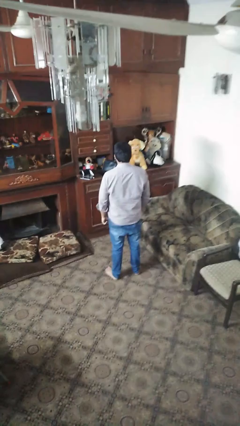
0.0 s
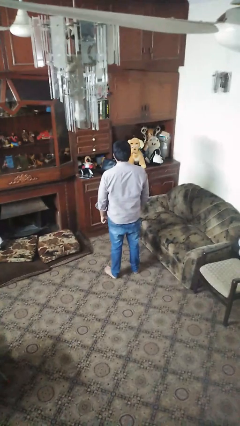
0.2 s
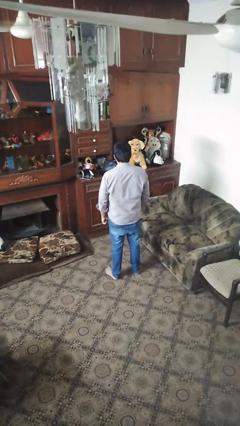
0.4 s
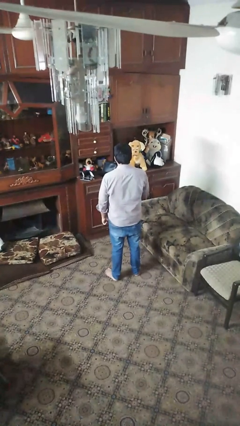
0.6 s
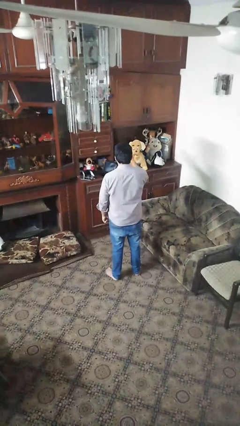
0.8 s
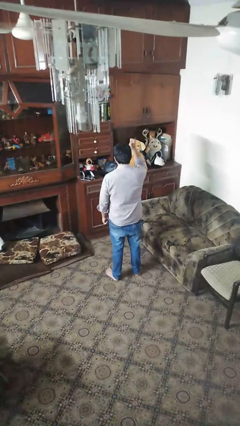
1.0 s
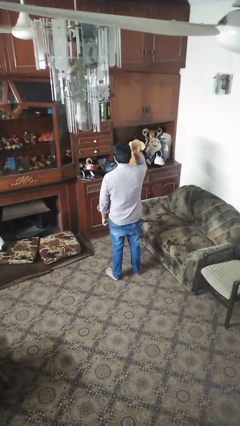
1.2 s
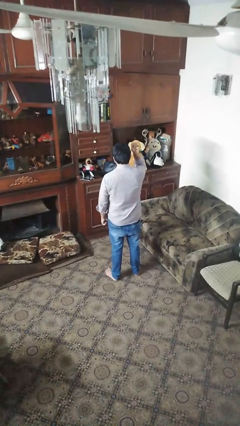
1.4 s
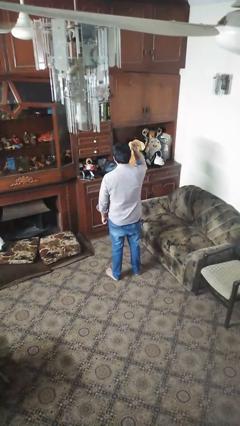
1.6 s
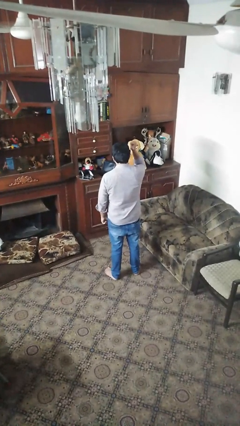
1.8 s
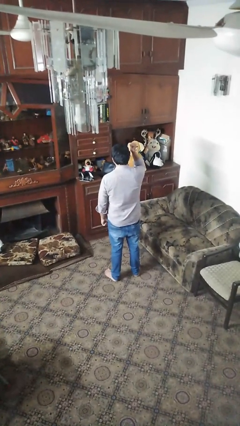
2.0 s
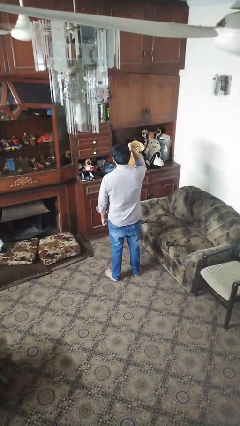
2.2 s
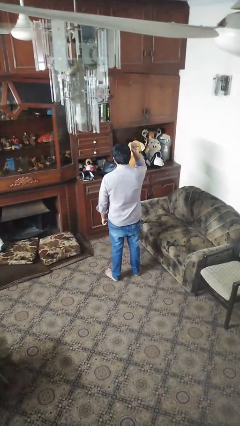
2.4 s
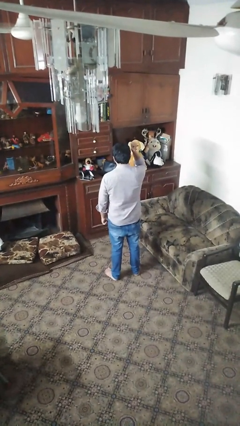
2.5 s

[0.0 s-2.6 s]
person gestures behind me

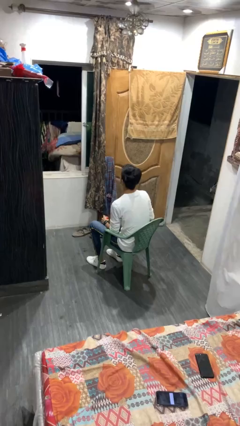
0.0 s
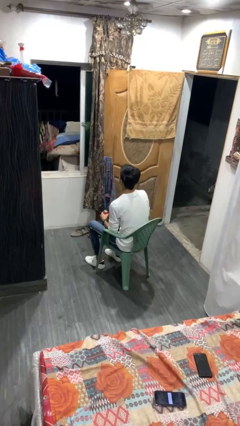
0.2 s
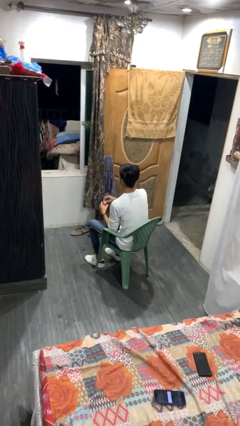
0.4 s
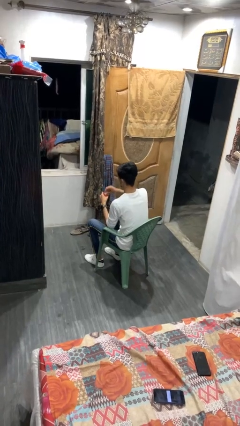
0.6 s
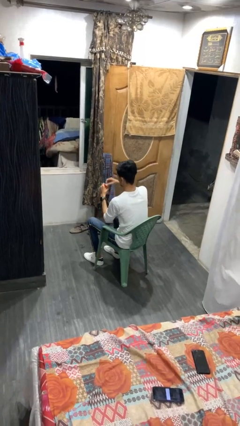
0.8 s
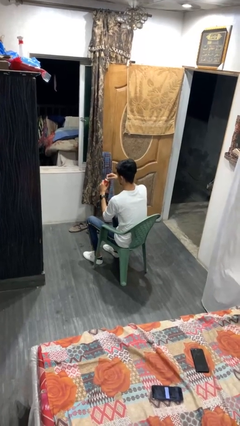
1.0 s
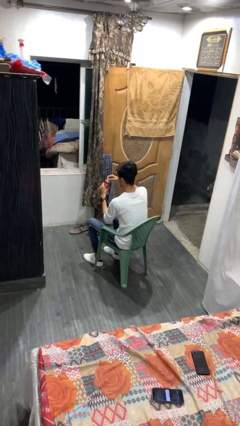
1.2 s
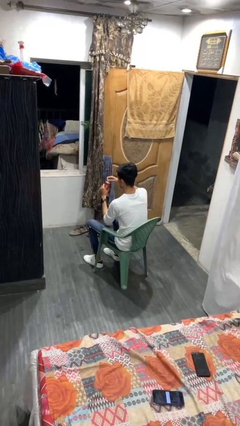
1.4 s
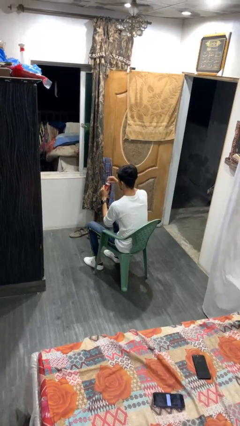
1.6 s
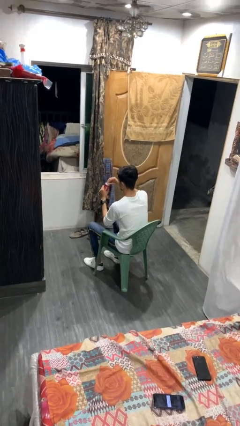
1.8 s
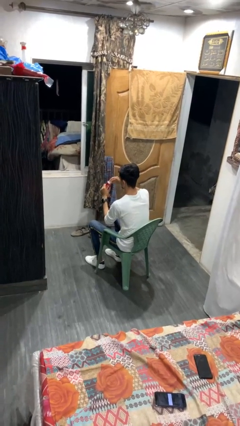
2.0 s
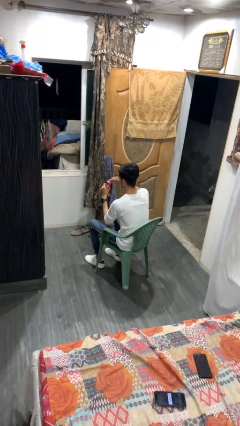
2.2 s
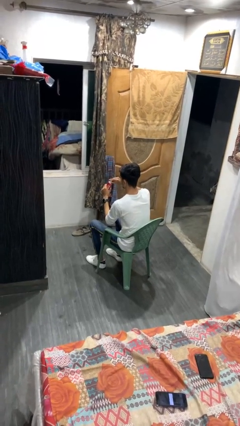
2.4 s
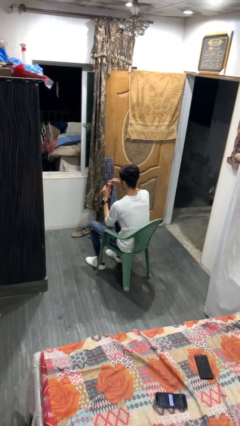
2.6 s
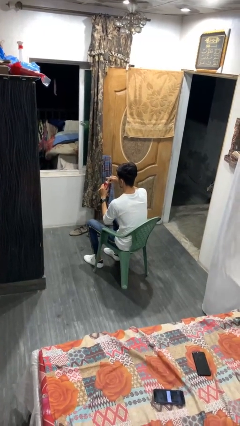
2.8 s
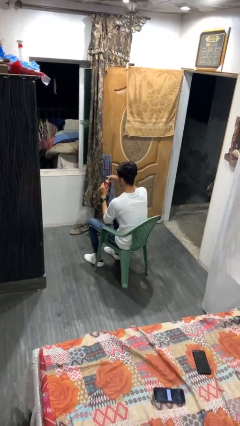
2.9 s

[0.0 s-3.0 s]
person opens beverage can

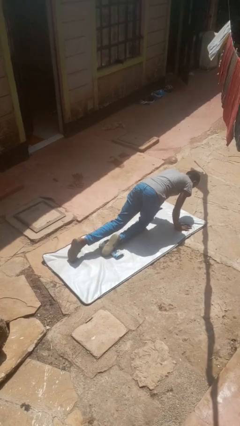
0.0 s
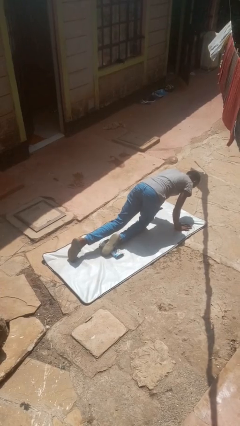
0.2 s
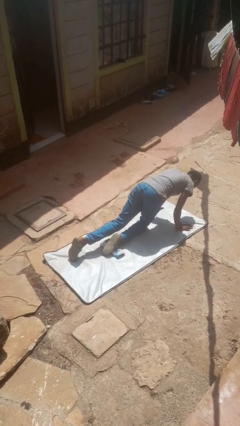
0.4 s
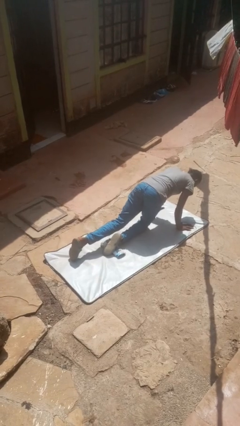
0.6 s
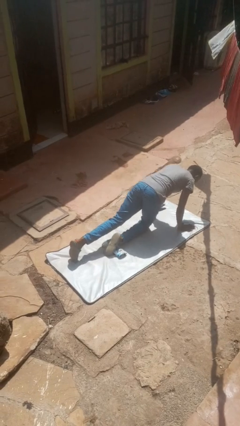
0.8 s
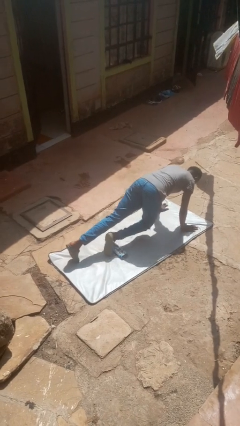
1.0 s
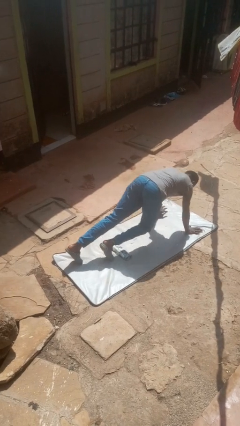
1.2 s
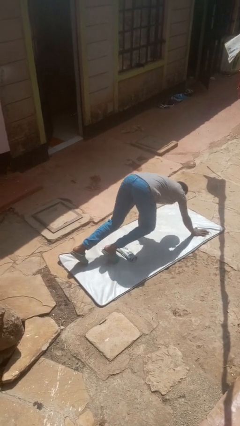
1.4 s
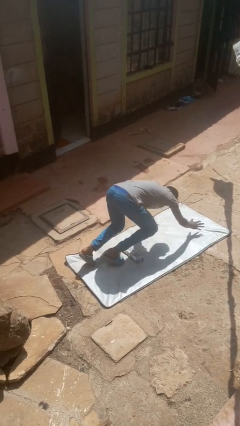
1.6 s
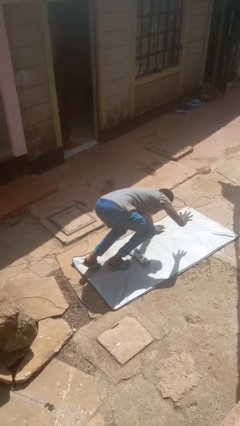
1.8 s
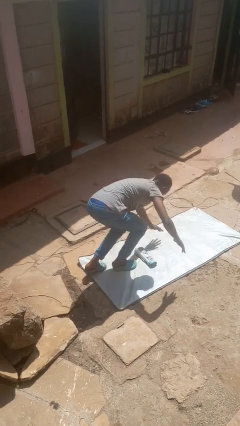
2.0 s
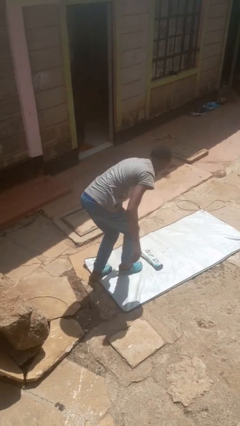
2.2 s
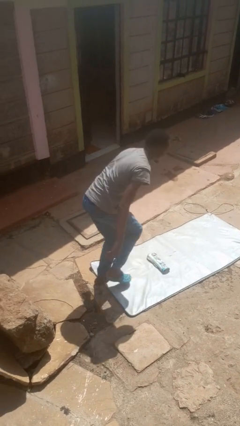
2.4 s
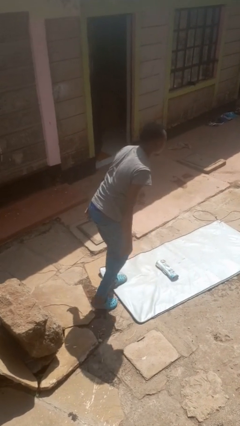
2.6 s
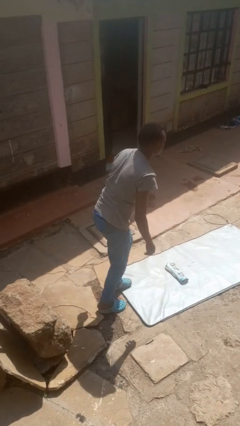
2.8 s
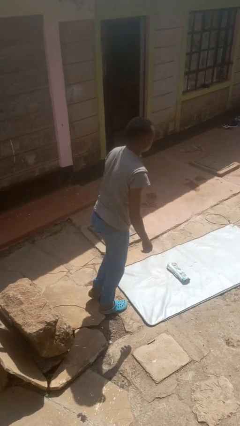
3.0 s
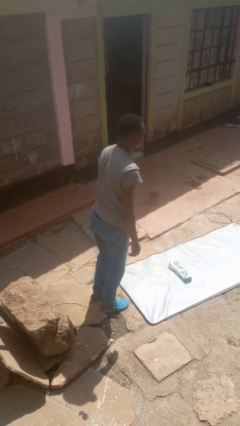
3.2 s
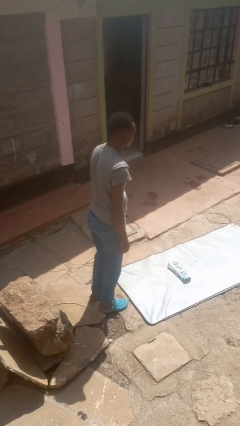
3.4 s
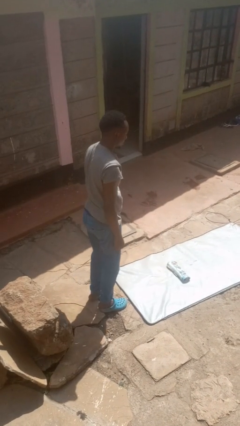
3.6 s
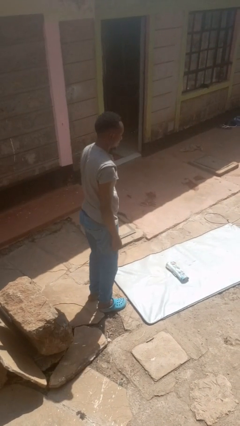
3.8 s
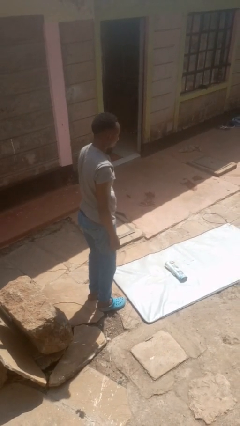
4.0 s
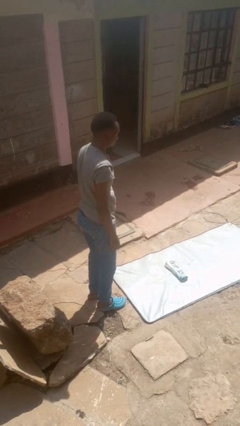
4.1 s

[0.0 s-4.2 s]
person stands up from floor

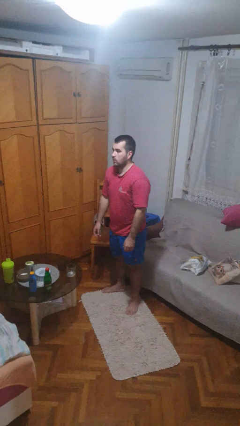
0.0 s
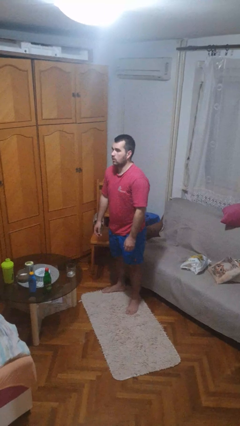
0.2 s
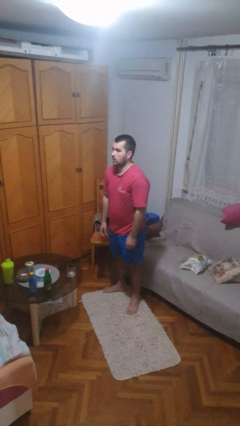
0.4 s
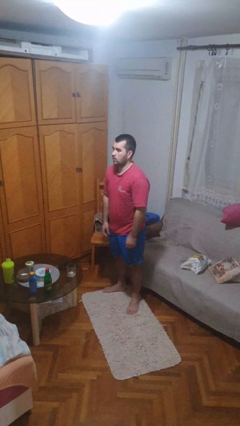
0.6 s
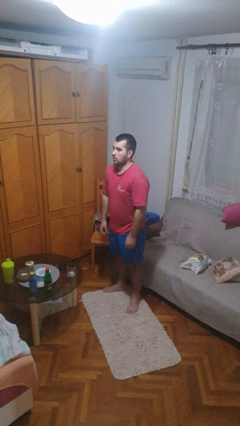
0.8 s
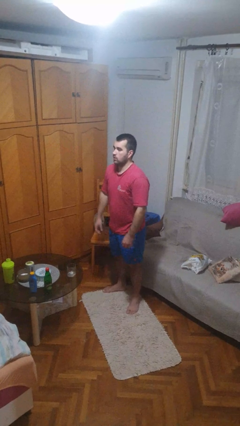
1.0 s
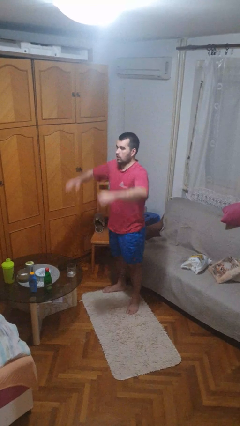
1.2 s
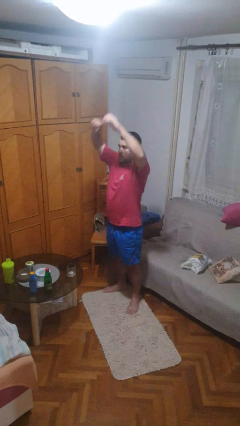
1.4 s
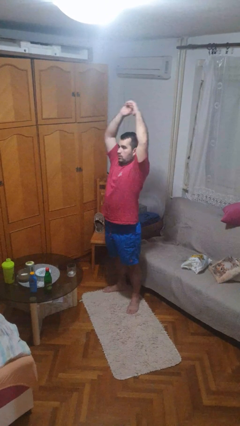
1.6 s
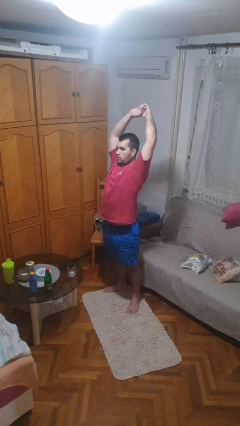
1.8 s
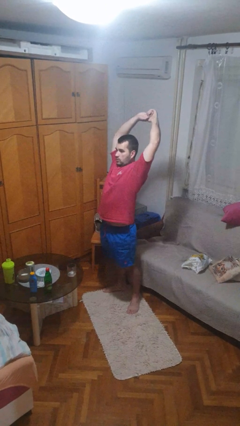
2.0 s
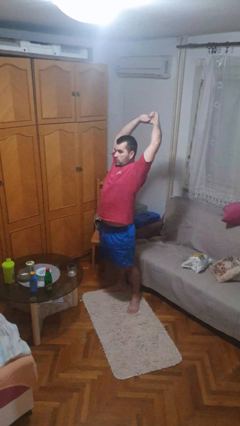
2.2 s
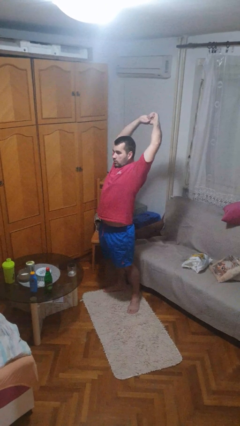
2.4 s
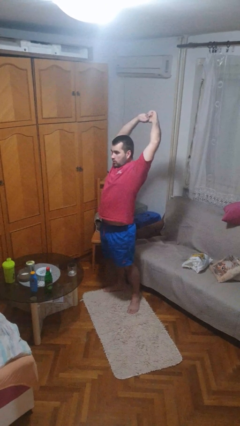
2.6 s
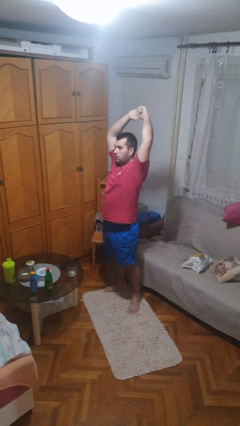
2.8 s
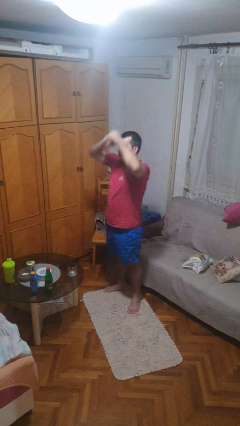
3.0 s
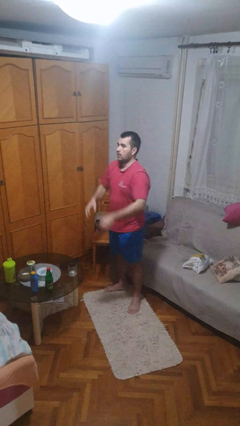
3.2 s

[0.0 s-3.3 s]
person stretches arms over head

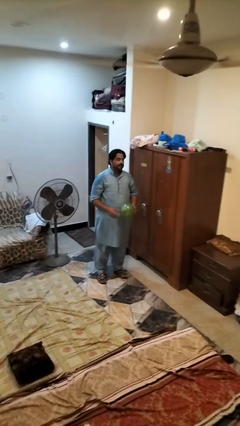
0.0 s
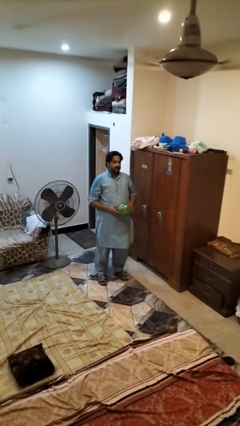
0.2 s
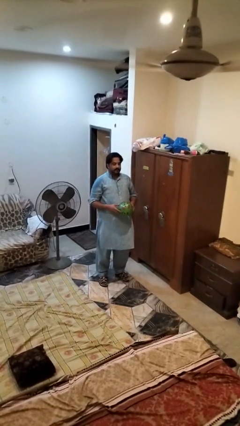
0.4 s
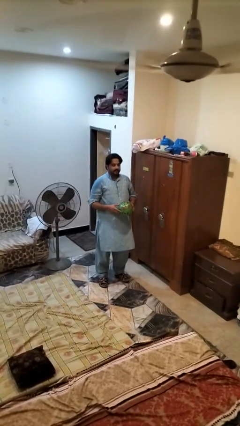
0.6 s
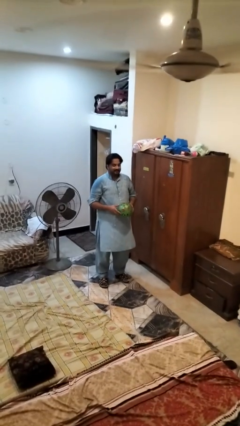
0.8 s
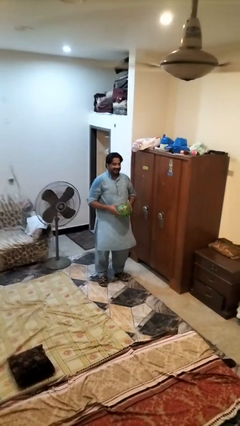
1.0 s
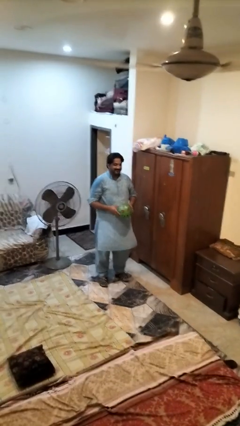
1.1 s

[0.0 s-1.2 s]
person picks up object from floor

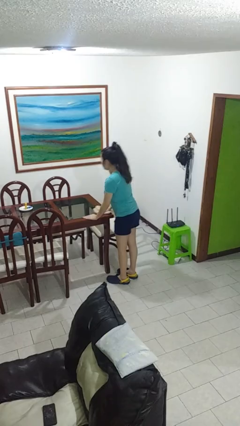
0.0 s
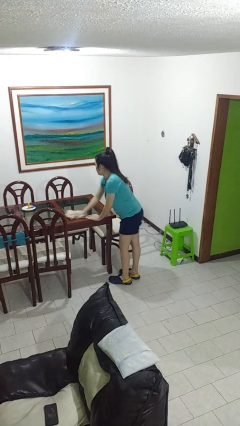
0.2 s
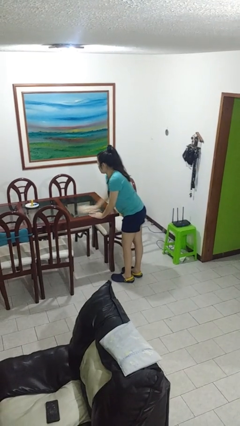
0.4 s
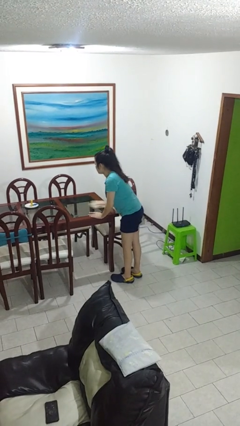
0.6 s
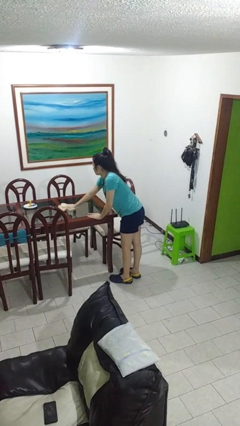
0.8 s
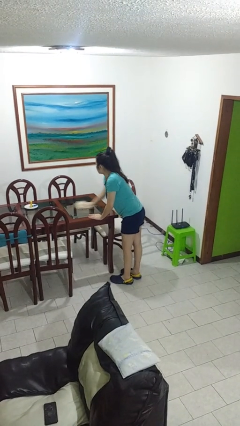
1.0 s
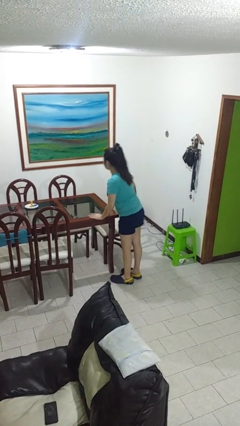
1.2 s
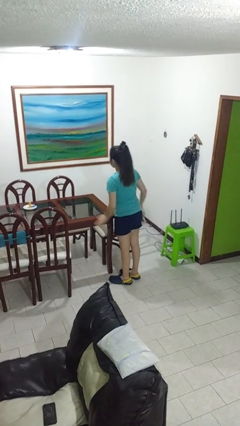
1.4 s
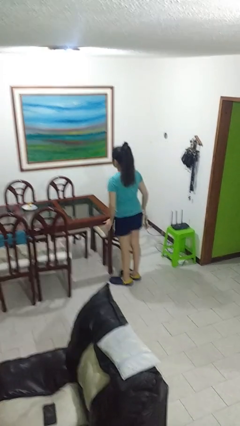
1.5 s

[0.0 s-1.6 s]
person cleans table with rag

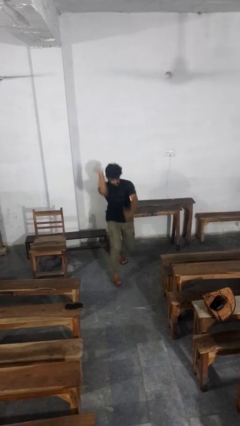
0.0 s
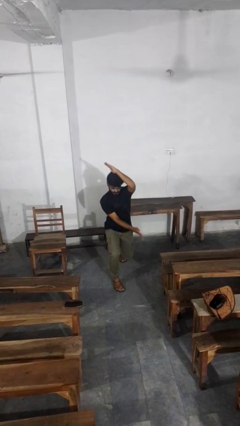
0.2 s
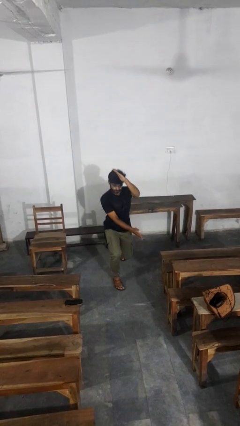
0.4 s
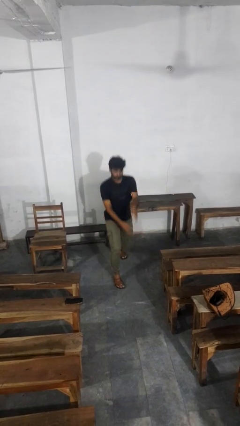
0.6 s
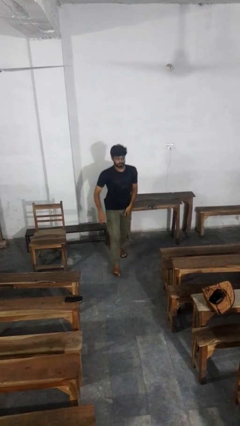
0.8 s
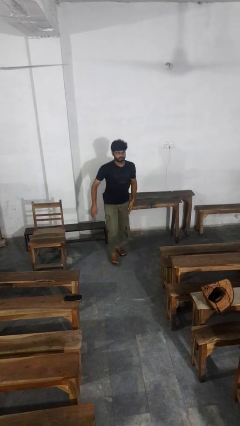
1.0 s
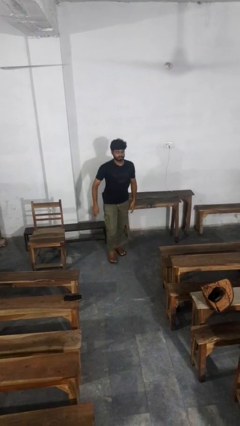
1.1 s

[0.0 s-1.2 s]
person karate chop
